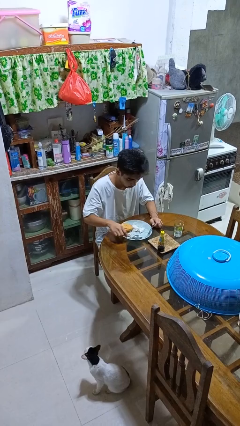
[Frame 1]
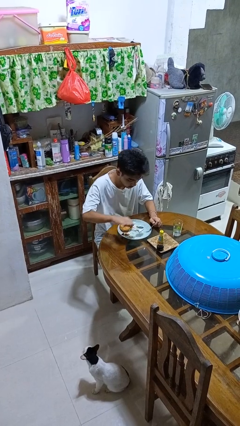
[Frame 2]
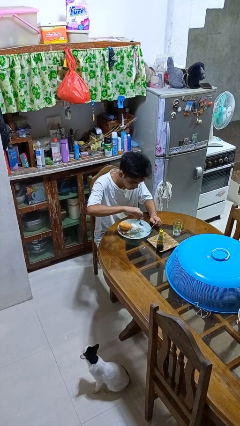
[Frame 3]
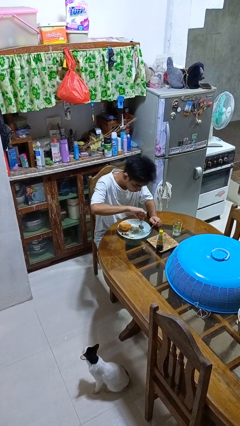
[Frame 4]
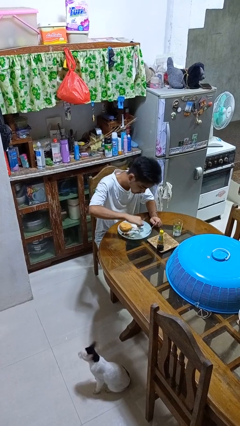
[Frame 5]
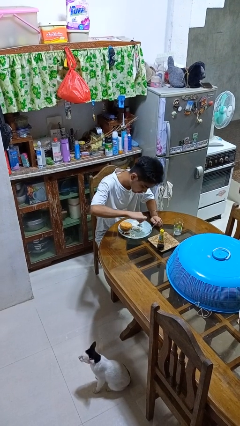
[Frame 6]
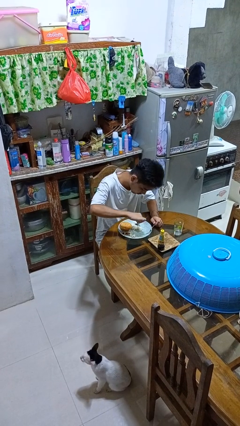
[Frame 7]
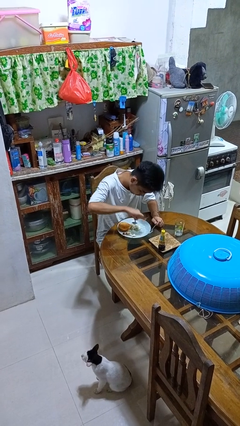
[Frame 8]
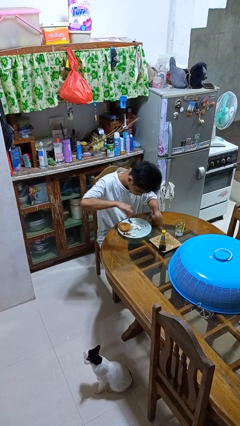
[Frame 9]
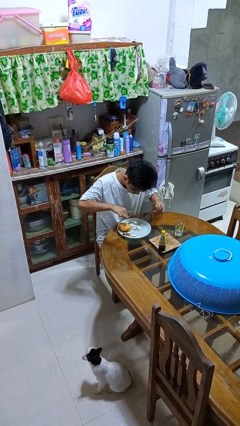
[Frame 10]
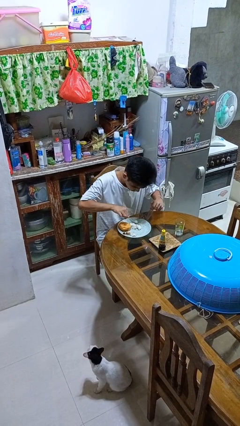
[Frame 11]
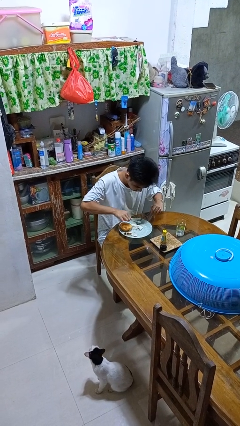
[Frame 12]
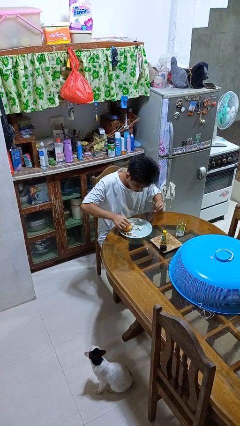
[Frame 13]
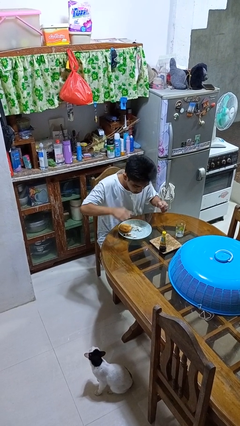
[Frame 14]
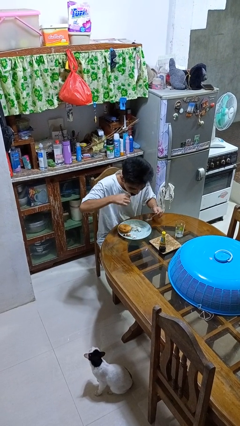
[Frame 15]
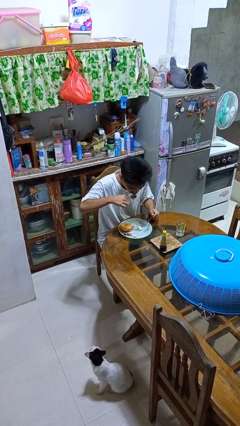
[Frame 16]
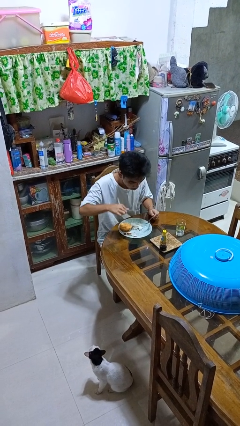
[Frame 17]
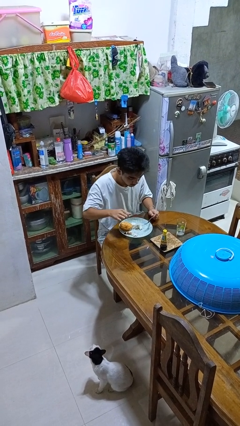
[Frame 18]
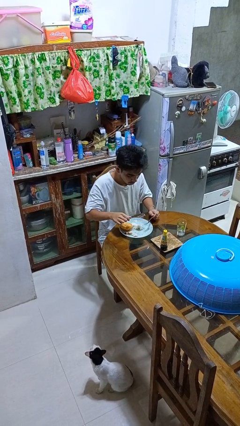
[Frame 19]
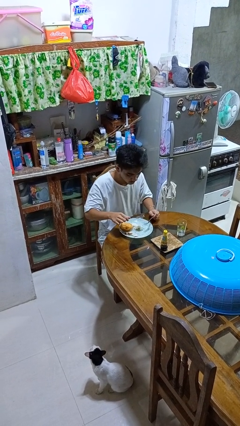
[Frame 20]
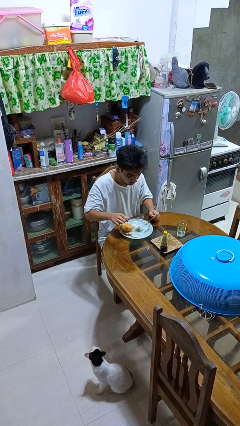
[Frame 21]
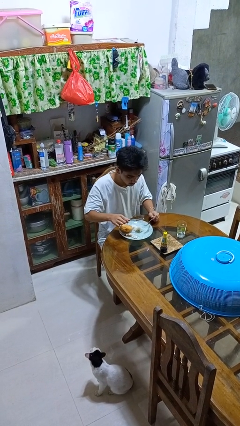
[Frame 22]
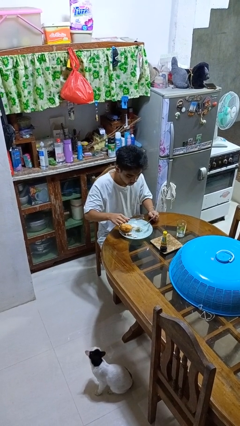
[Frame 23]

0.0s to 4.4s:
person eats with utensil

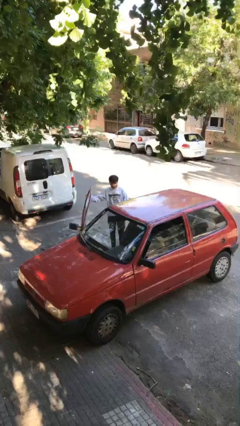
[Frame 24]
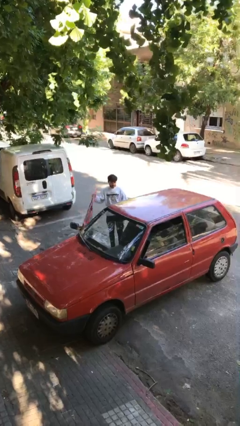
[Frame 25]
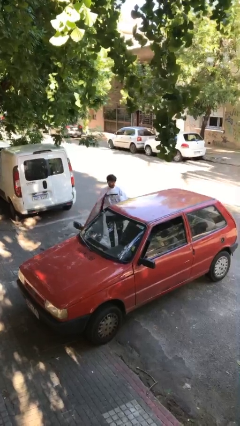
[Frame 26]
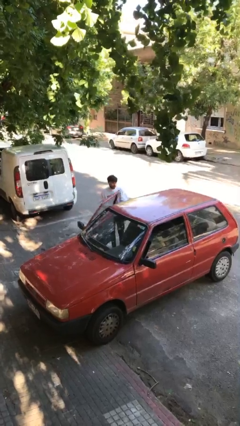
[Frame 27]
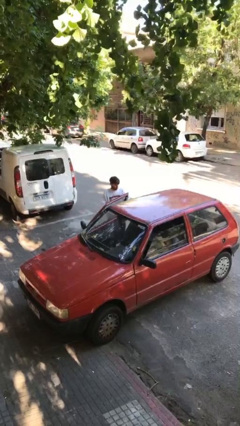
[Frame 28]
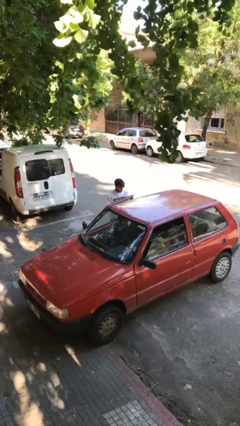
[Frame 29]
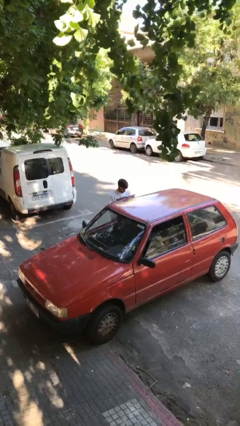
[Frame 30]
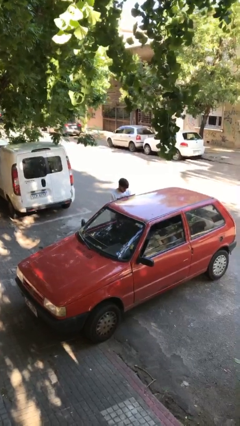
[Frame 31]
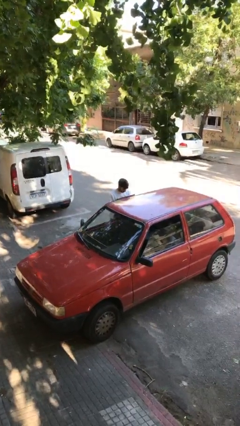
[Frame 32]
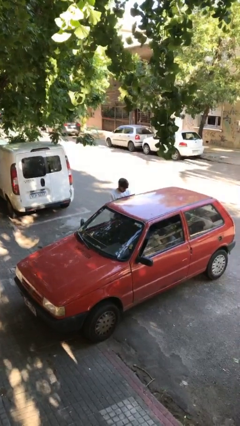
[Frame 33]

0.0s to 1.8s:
person closes car door

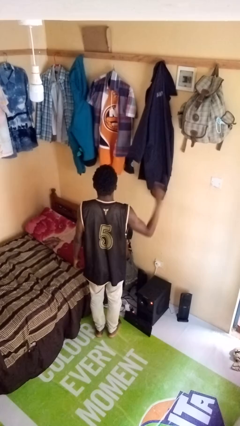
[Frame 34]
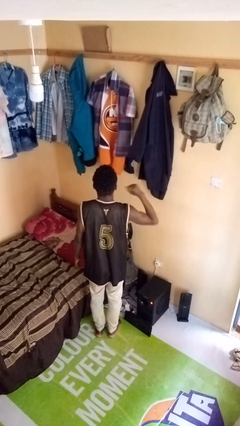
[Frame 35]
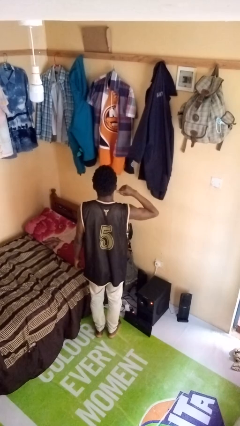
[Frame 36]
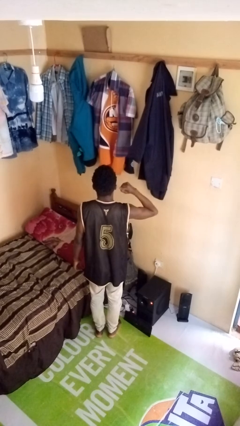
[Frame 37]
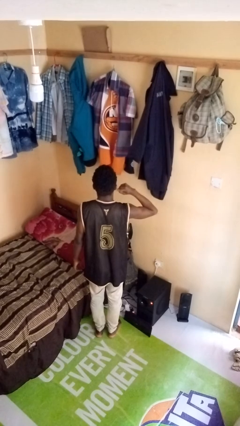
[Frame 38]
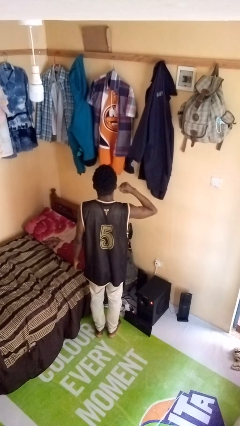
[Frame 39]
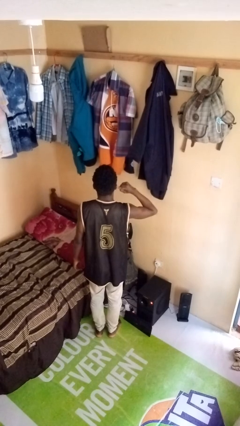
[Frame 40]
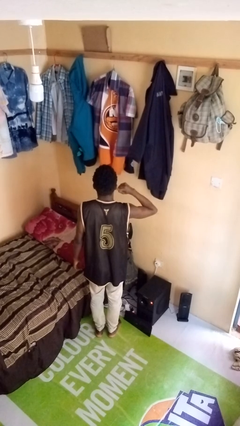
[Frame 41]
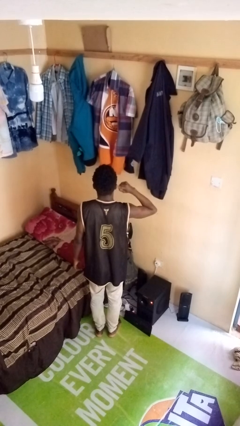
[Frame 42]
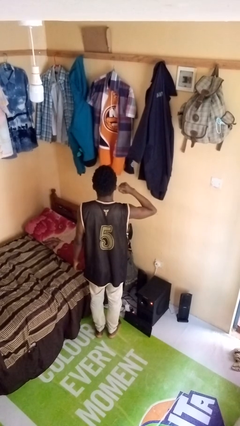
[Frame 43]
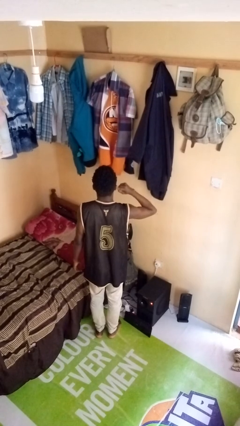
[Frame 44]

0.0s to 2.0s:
person gestures listen closely

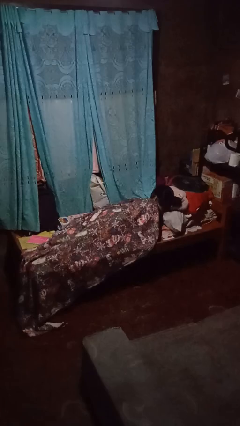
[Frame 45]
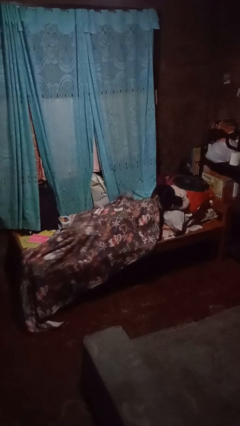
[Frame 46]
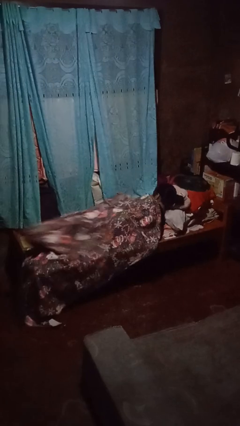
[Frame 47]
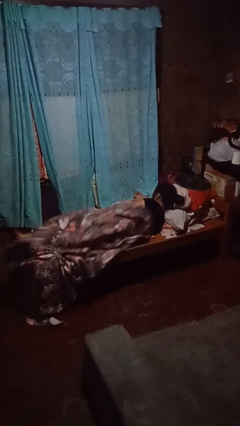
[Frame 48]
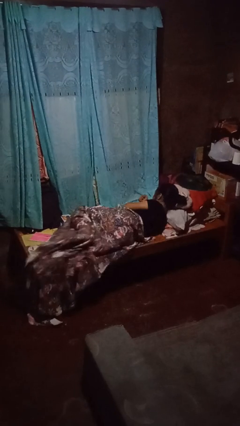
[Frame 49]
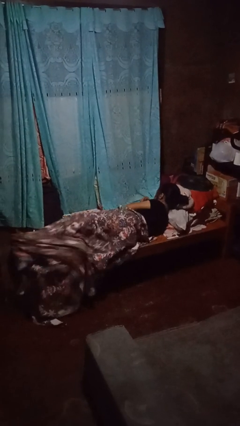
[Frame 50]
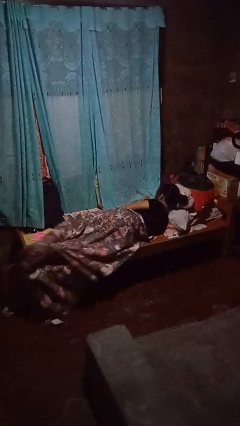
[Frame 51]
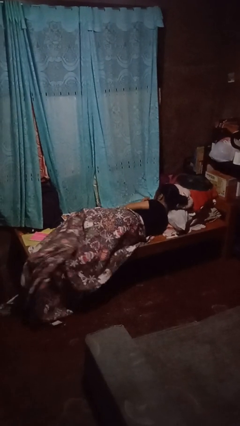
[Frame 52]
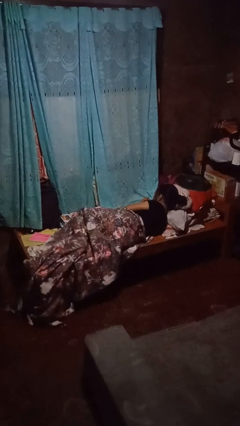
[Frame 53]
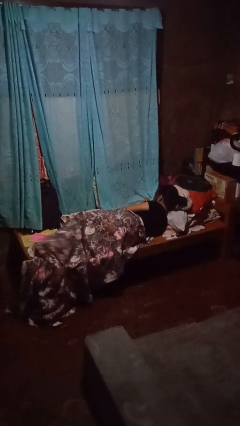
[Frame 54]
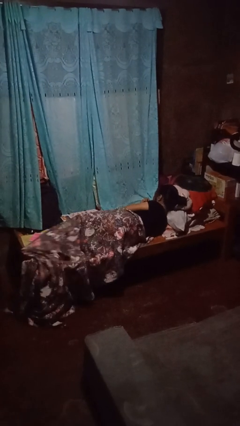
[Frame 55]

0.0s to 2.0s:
person uncovers with bedsheets

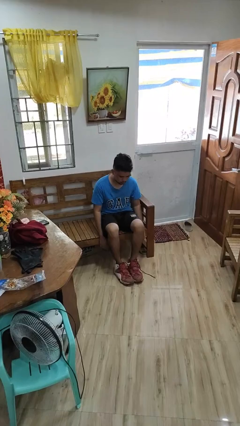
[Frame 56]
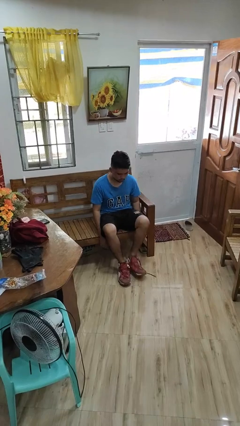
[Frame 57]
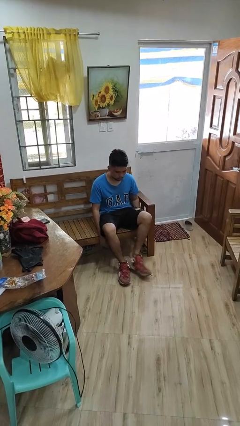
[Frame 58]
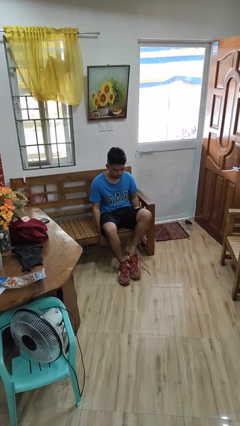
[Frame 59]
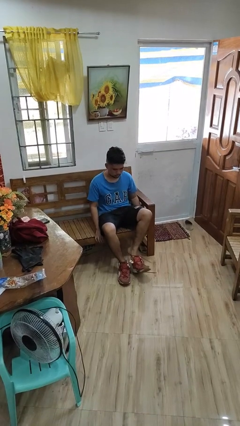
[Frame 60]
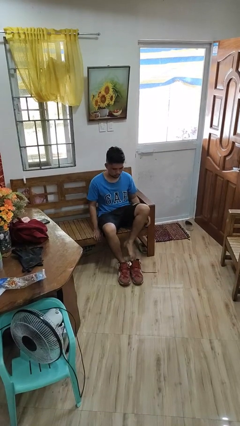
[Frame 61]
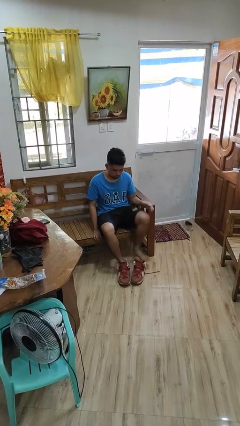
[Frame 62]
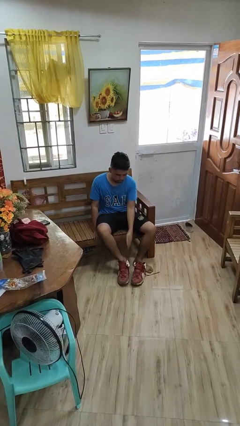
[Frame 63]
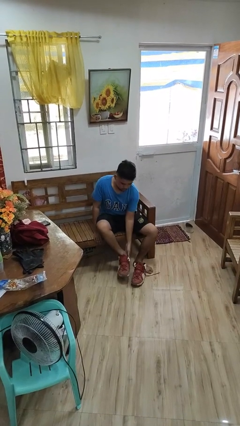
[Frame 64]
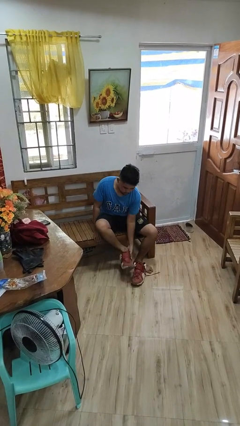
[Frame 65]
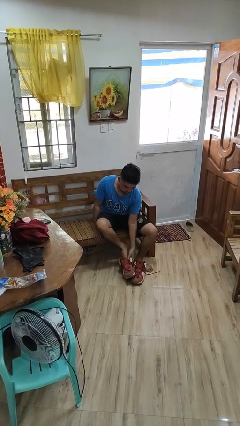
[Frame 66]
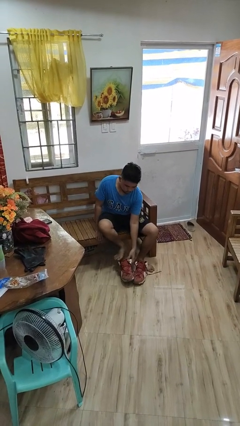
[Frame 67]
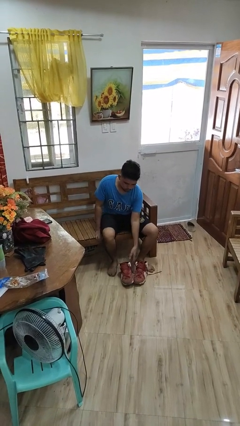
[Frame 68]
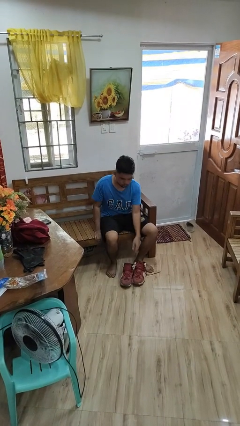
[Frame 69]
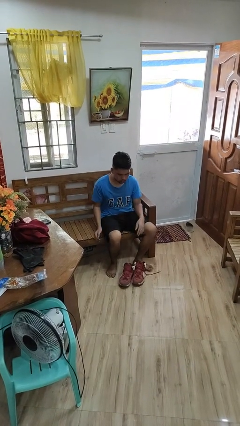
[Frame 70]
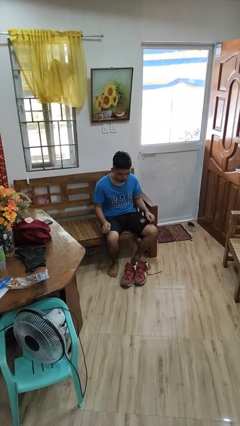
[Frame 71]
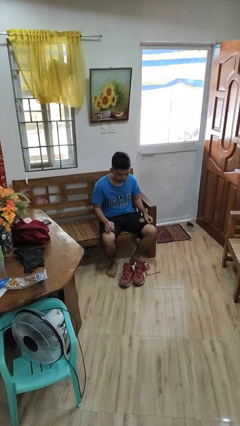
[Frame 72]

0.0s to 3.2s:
person takes off shoes

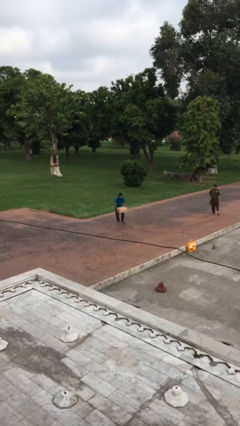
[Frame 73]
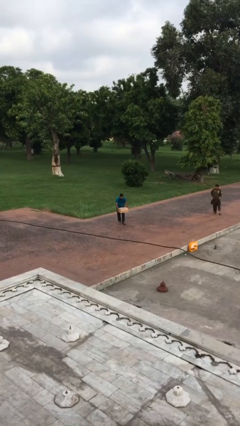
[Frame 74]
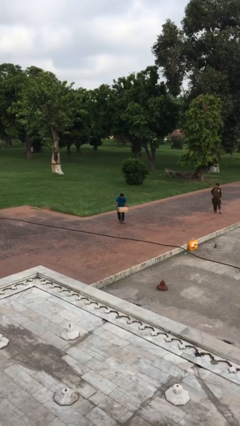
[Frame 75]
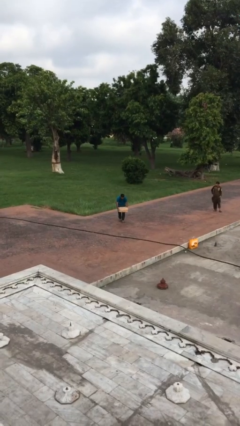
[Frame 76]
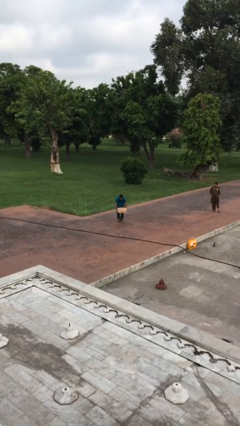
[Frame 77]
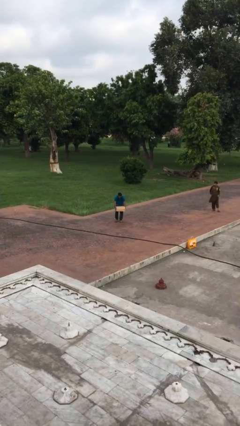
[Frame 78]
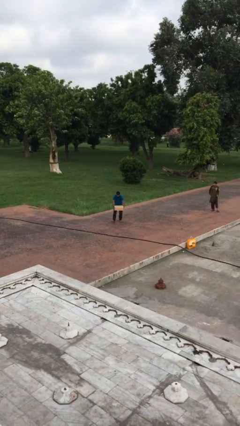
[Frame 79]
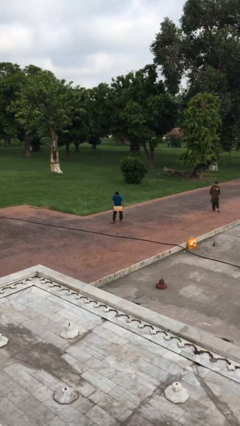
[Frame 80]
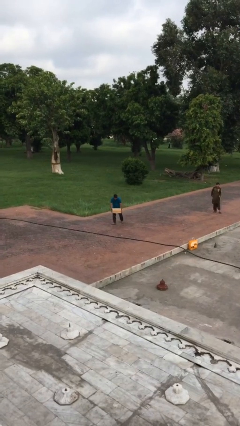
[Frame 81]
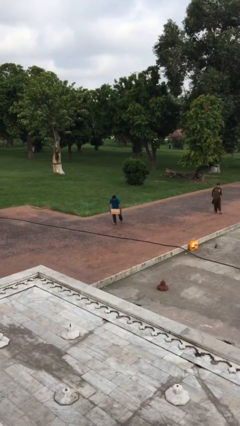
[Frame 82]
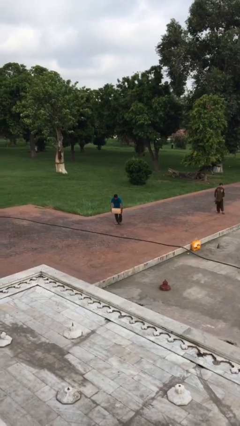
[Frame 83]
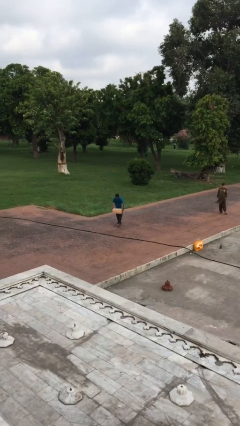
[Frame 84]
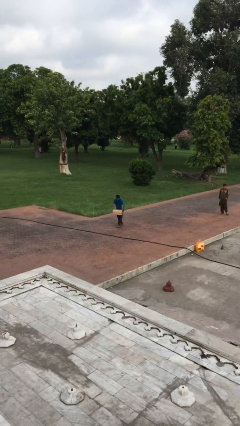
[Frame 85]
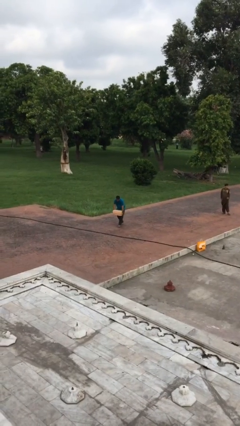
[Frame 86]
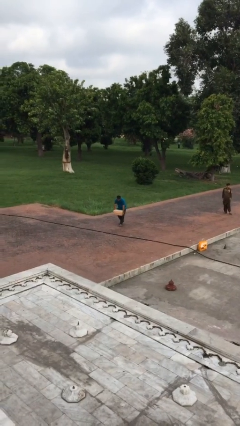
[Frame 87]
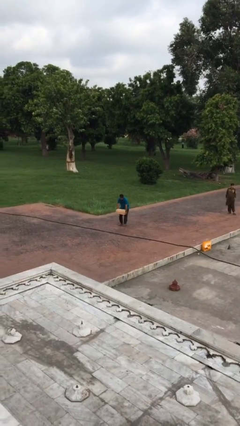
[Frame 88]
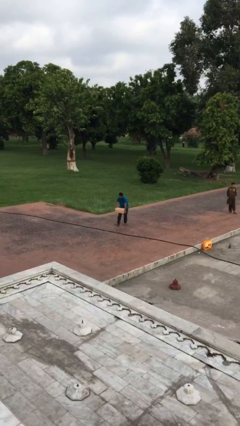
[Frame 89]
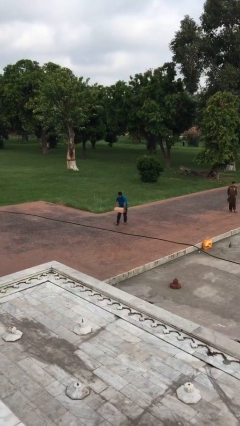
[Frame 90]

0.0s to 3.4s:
person carries heavy object

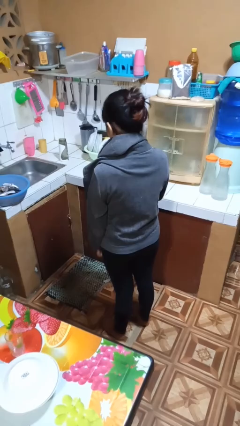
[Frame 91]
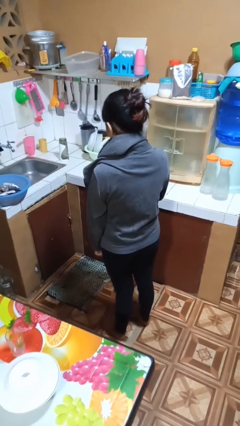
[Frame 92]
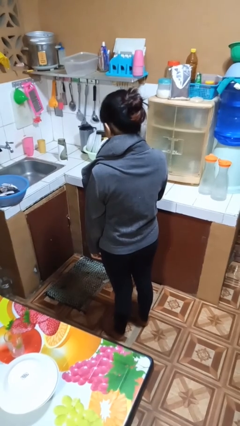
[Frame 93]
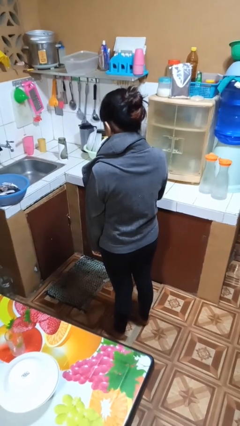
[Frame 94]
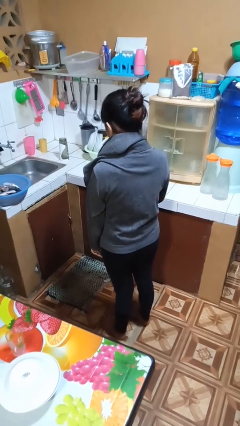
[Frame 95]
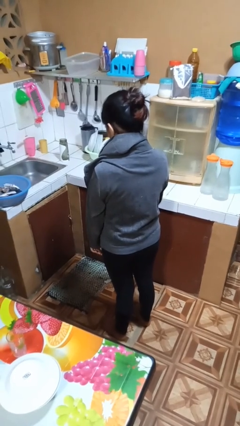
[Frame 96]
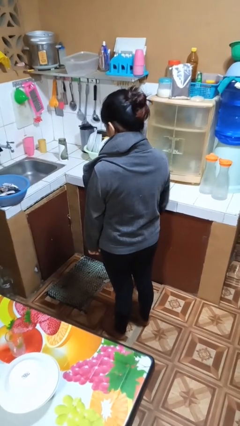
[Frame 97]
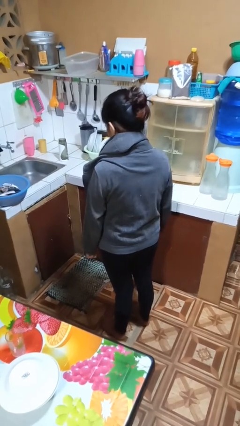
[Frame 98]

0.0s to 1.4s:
person unzips jacket
